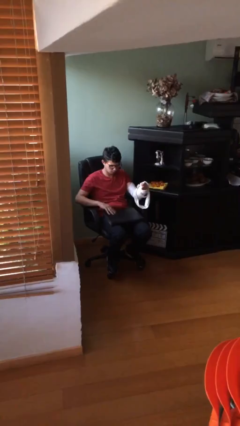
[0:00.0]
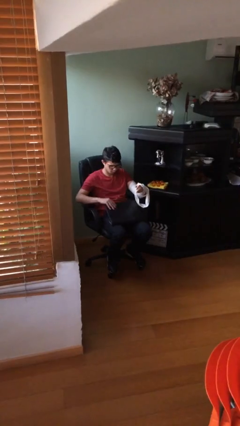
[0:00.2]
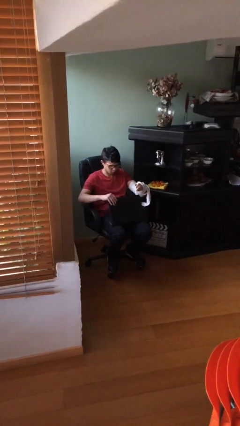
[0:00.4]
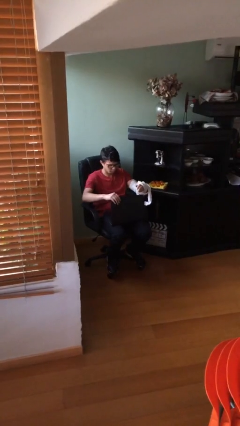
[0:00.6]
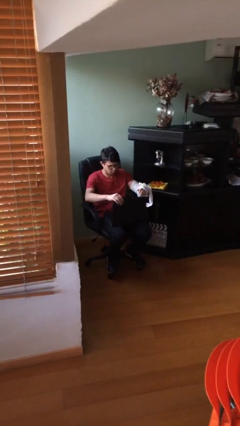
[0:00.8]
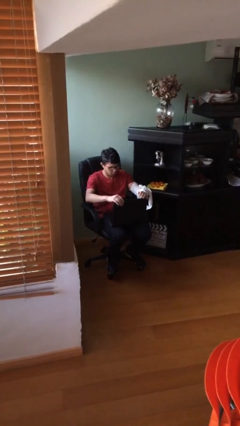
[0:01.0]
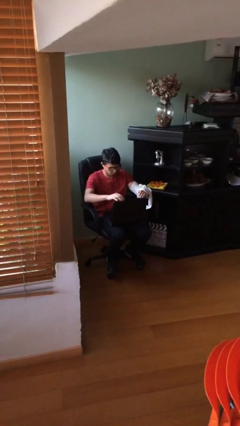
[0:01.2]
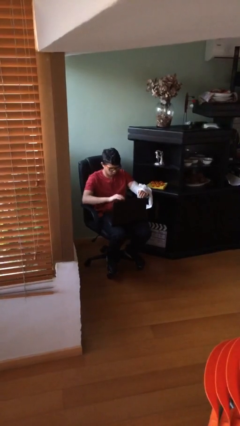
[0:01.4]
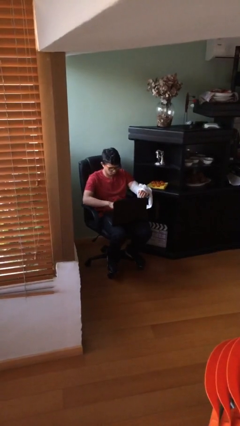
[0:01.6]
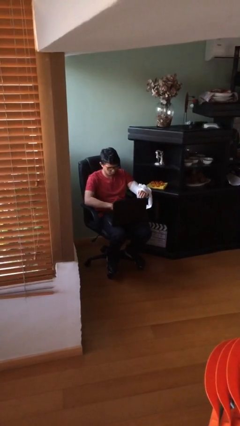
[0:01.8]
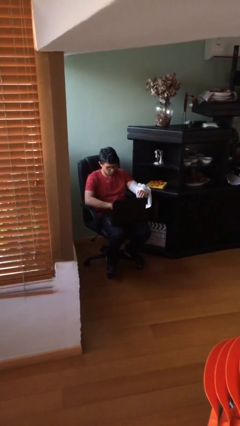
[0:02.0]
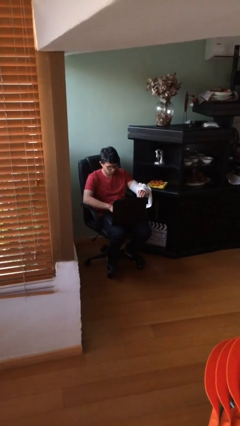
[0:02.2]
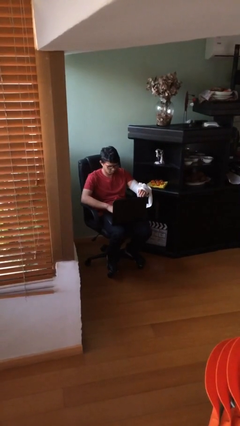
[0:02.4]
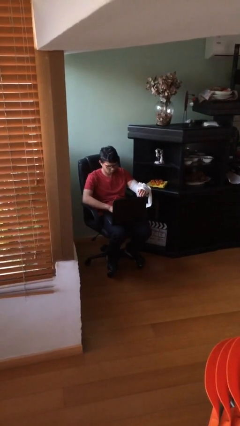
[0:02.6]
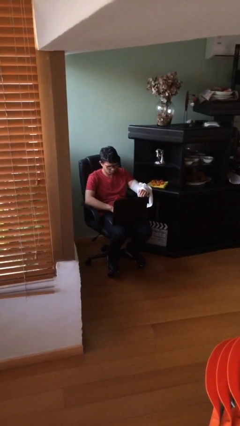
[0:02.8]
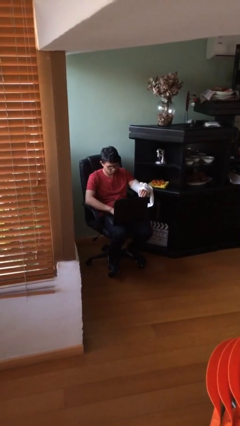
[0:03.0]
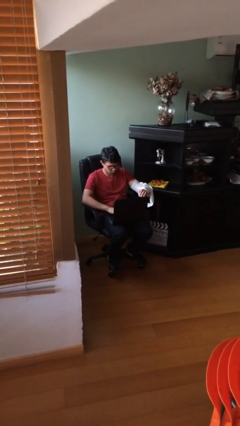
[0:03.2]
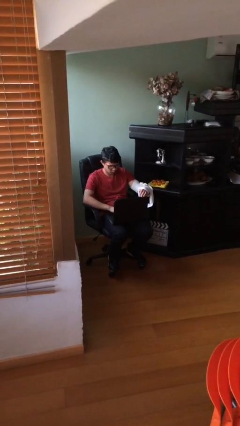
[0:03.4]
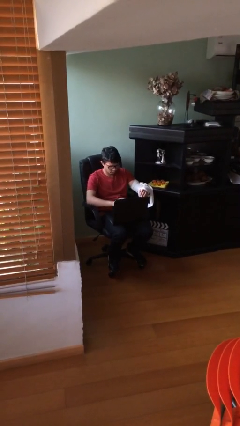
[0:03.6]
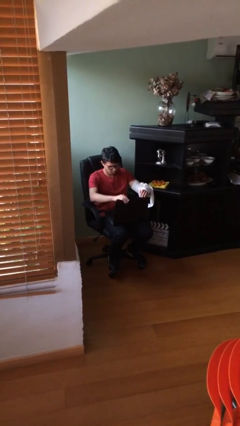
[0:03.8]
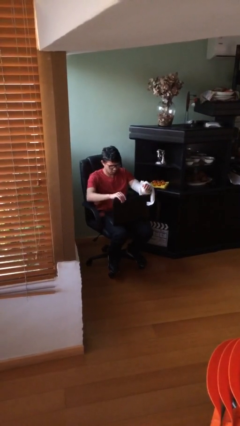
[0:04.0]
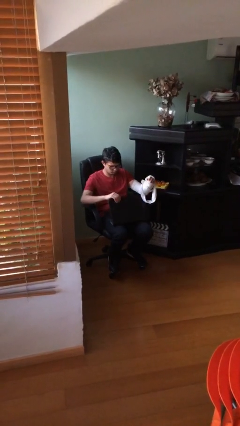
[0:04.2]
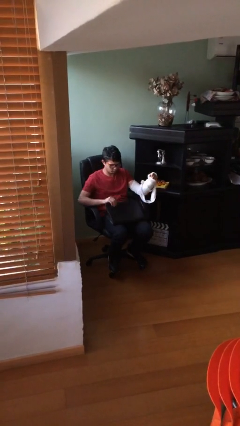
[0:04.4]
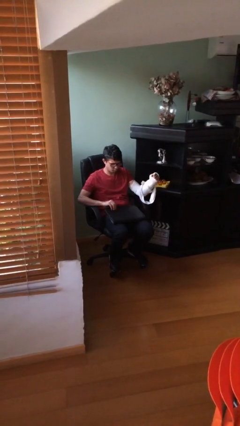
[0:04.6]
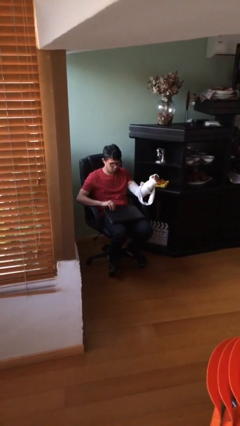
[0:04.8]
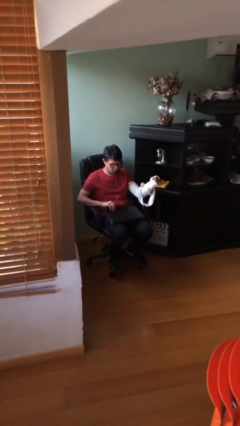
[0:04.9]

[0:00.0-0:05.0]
person interacts with laptop

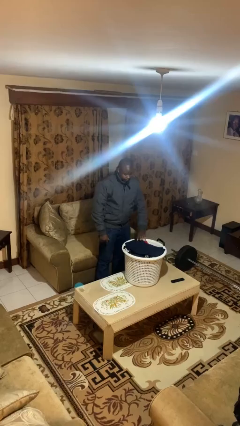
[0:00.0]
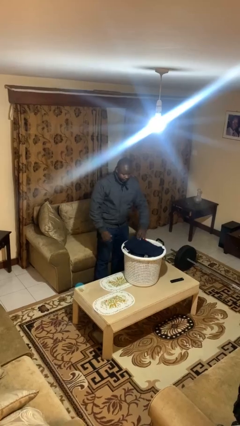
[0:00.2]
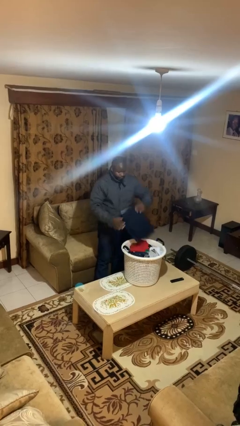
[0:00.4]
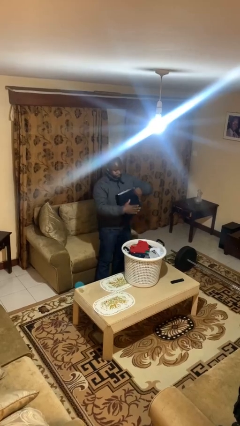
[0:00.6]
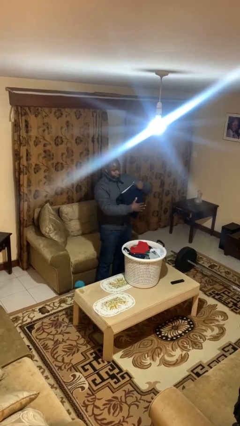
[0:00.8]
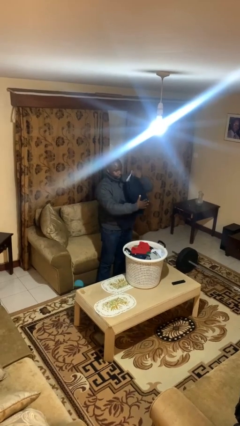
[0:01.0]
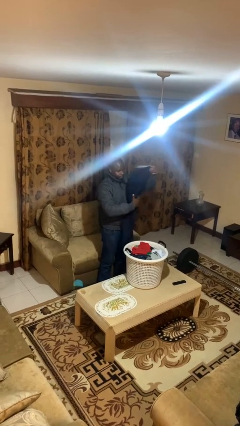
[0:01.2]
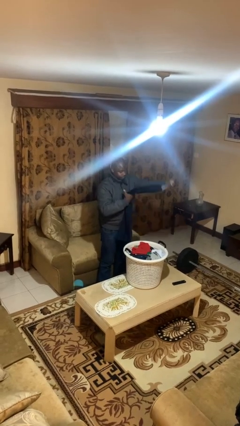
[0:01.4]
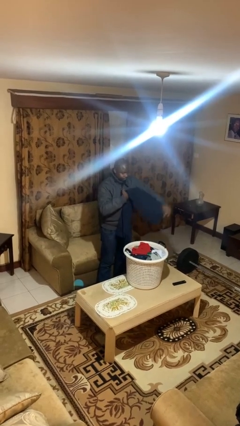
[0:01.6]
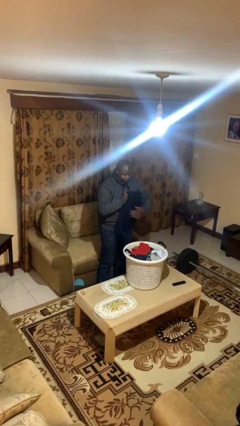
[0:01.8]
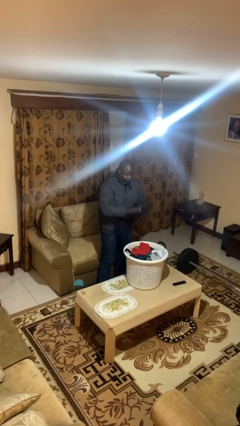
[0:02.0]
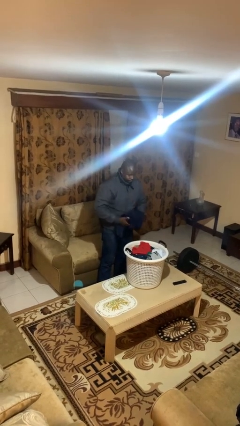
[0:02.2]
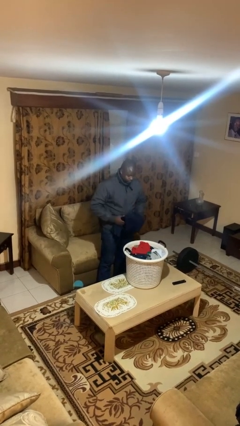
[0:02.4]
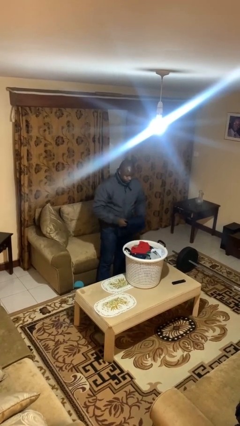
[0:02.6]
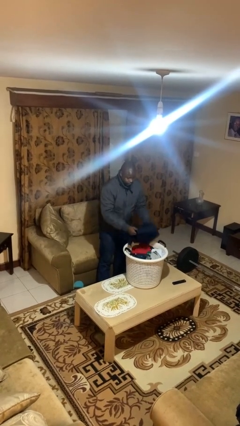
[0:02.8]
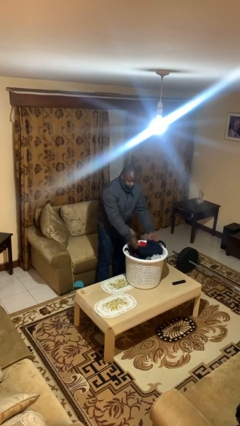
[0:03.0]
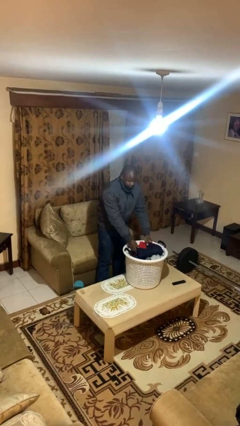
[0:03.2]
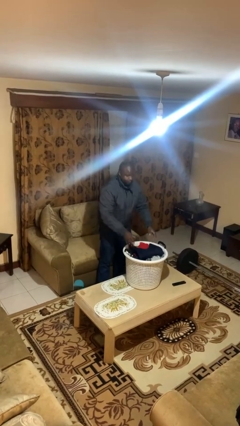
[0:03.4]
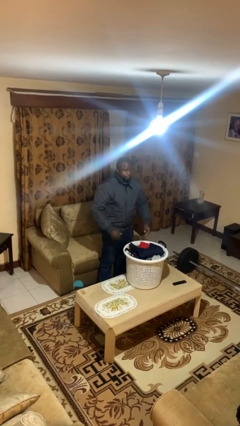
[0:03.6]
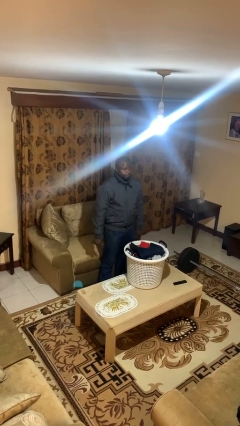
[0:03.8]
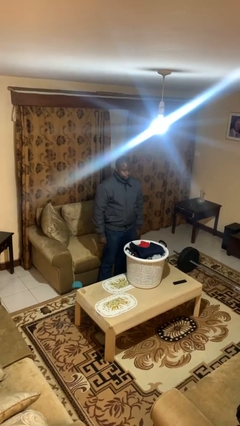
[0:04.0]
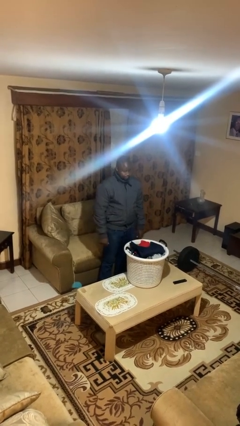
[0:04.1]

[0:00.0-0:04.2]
person folds pants

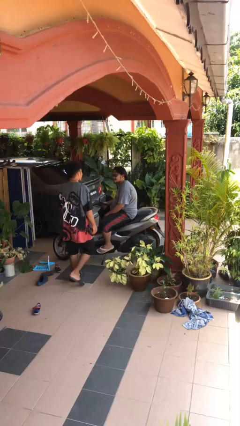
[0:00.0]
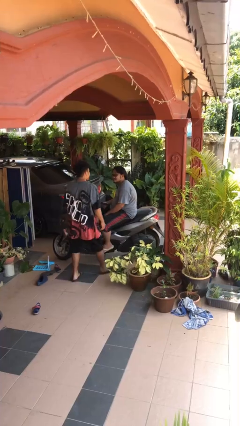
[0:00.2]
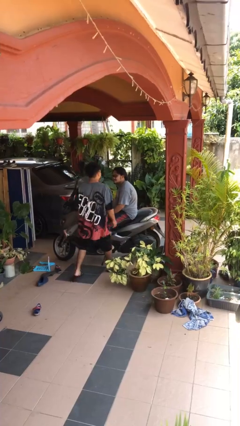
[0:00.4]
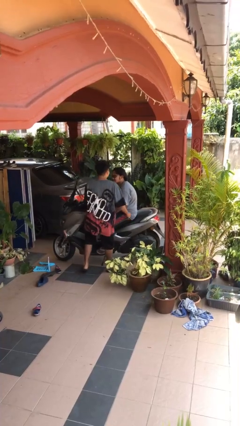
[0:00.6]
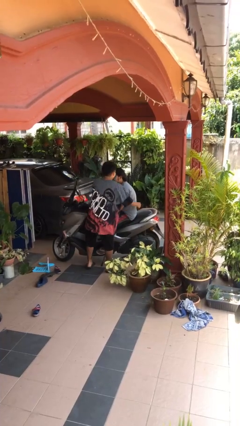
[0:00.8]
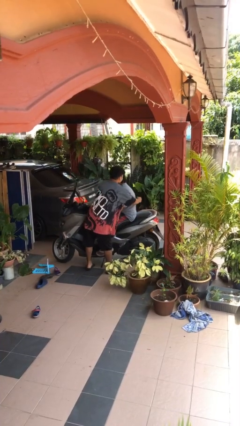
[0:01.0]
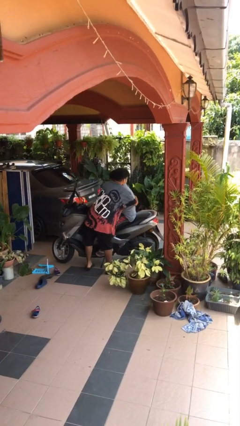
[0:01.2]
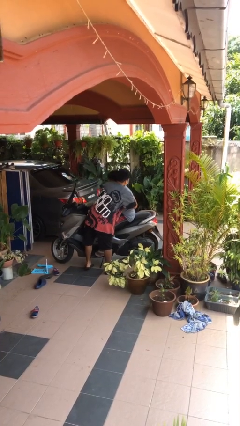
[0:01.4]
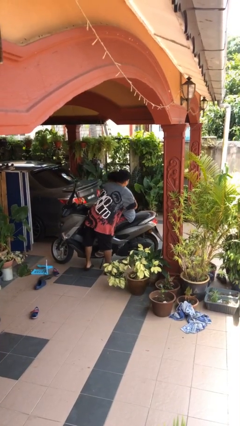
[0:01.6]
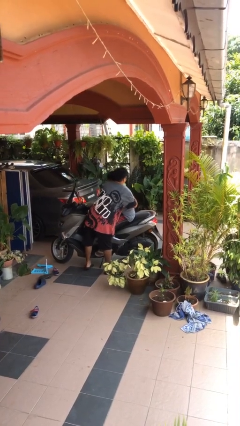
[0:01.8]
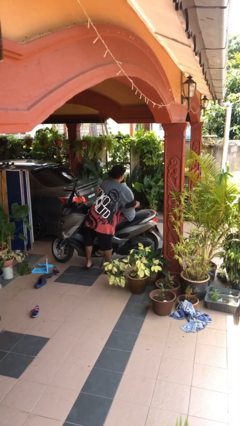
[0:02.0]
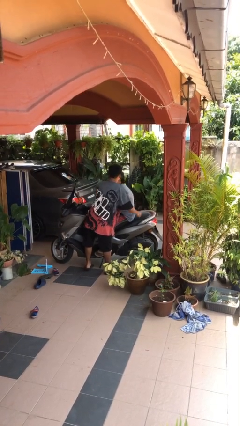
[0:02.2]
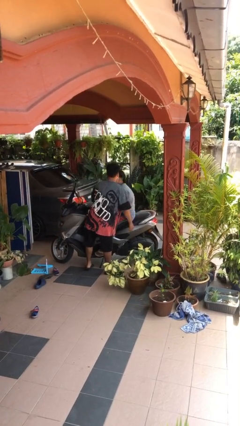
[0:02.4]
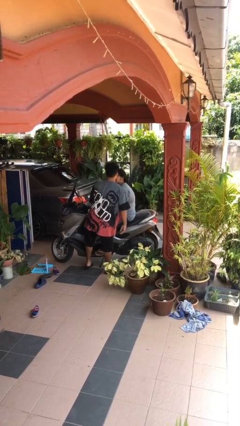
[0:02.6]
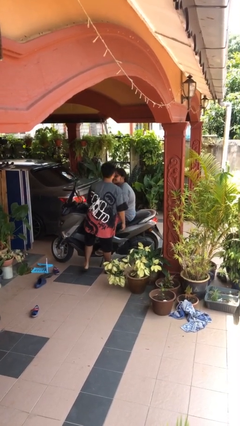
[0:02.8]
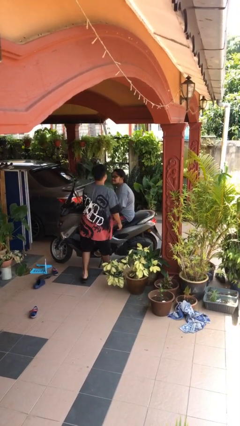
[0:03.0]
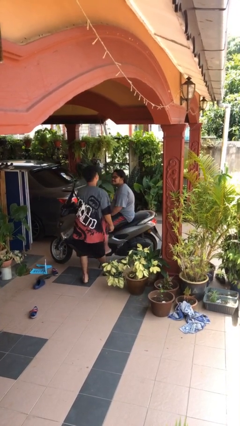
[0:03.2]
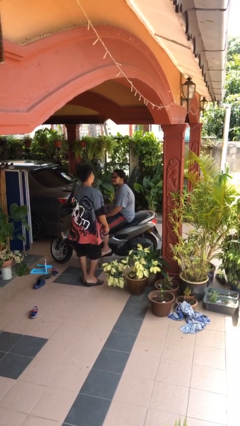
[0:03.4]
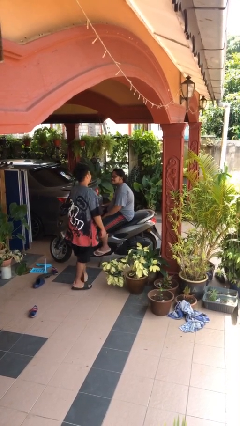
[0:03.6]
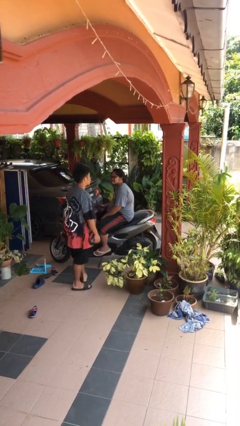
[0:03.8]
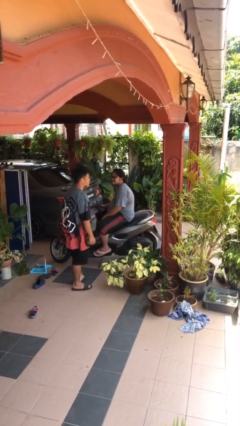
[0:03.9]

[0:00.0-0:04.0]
person embraces person

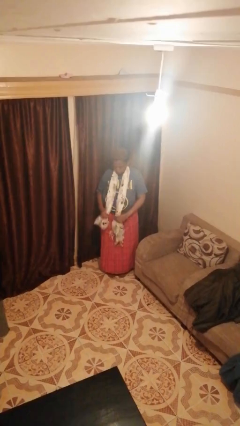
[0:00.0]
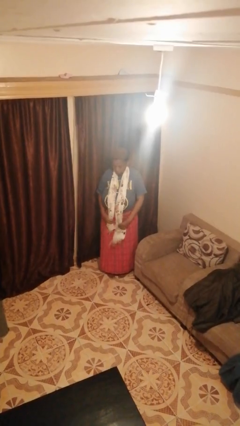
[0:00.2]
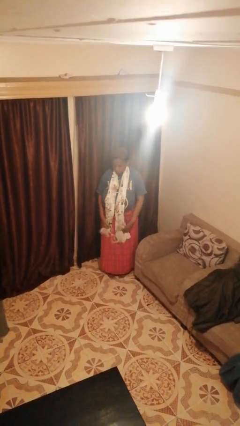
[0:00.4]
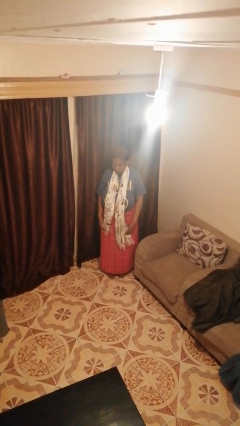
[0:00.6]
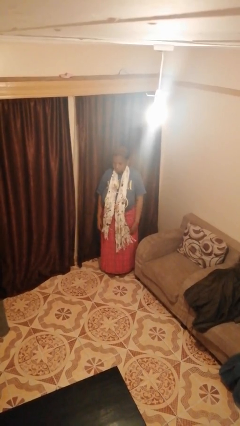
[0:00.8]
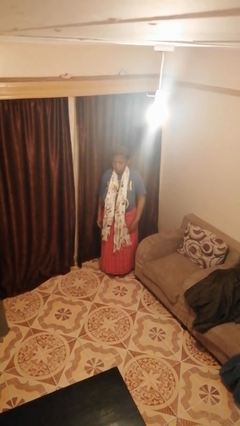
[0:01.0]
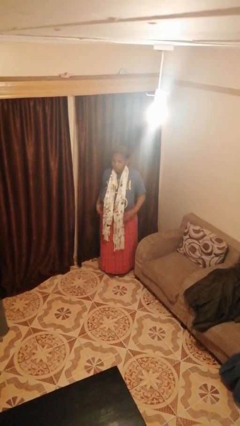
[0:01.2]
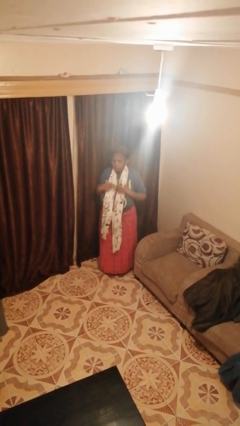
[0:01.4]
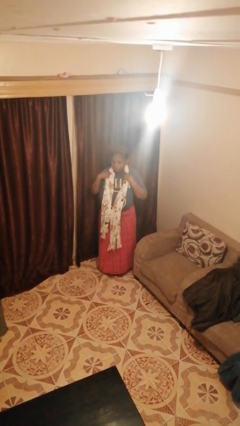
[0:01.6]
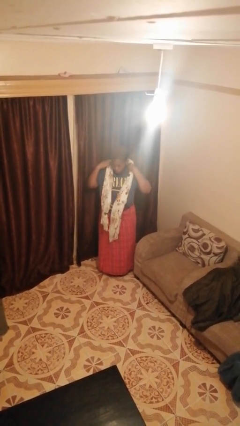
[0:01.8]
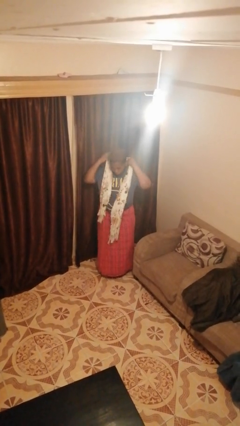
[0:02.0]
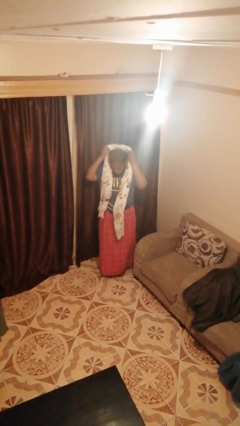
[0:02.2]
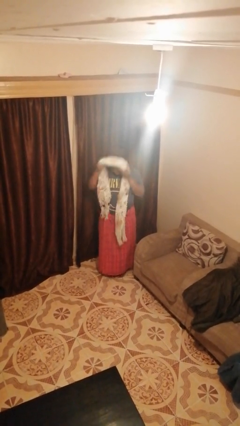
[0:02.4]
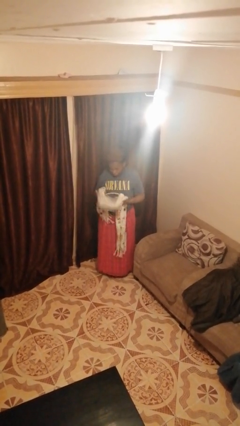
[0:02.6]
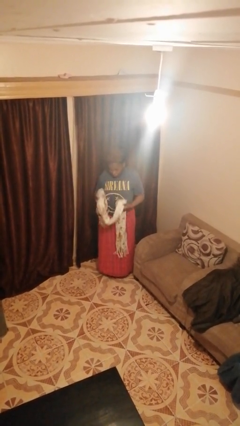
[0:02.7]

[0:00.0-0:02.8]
person takes off scarf

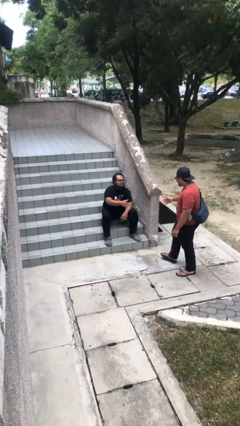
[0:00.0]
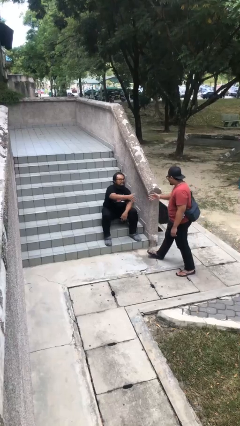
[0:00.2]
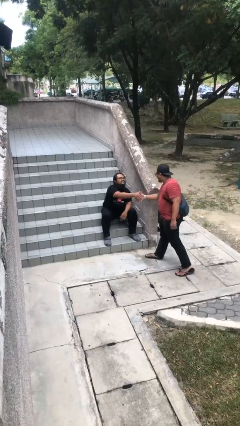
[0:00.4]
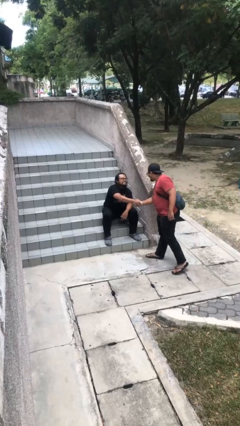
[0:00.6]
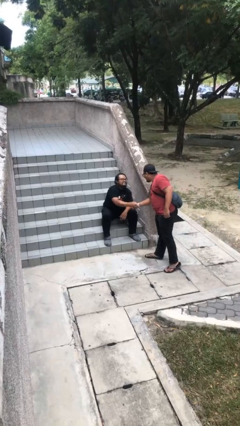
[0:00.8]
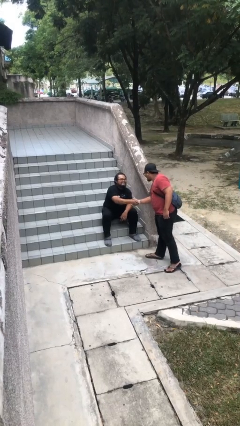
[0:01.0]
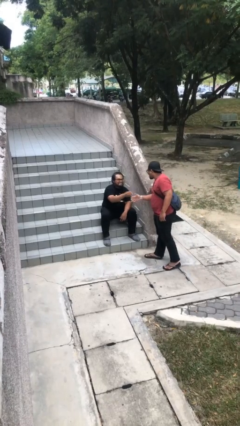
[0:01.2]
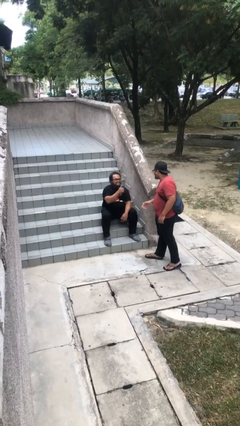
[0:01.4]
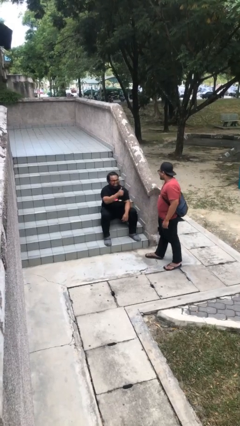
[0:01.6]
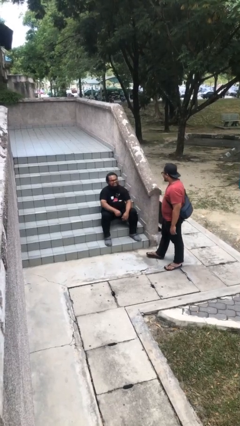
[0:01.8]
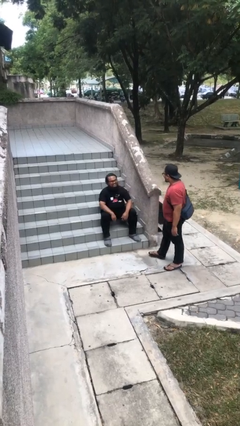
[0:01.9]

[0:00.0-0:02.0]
person shakes hand
